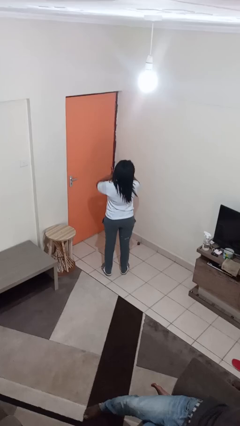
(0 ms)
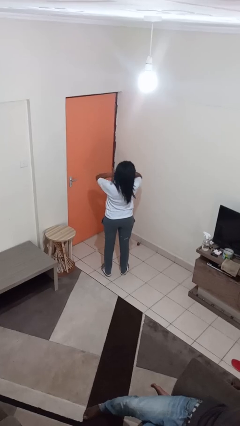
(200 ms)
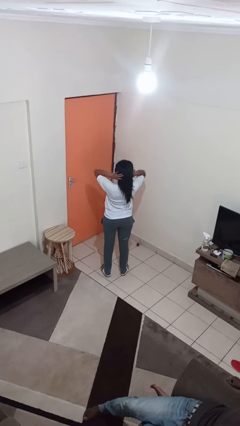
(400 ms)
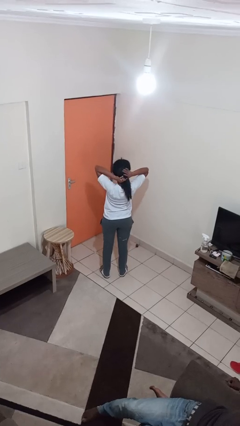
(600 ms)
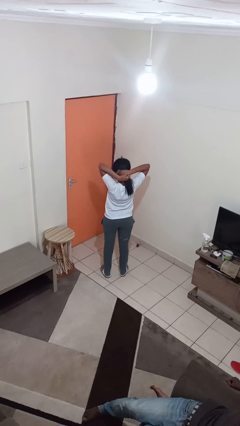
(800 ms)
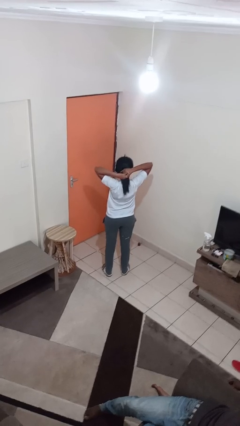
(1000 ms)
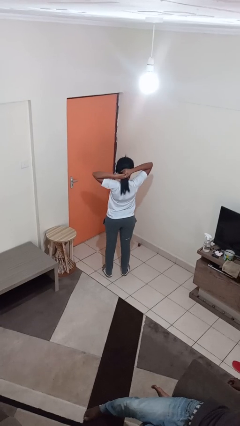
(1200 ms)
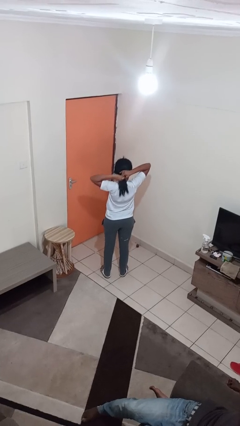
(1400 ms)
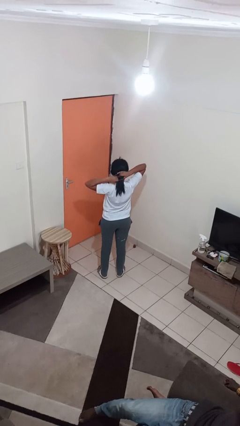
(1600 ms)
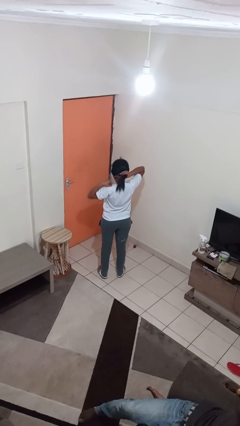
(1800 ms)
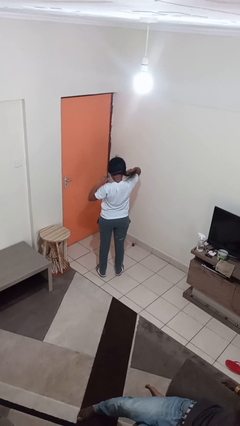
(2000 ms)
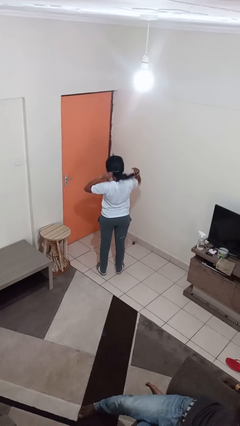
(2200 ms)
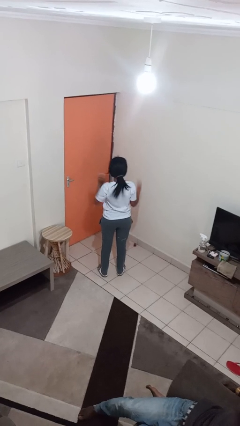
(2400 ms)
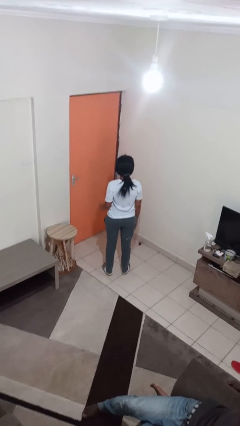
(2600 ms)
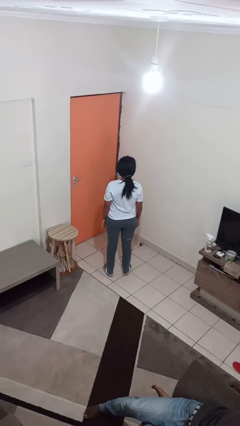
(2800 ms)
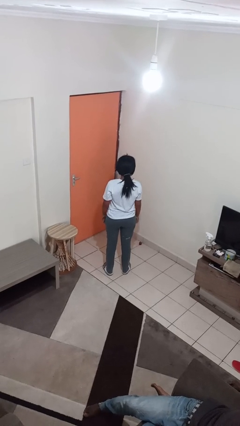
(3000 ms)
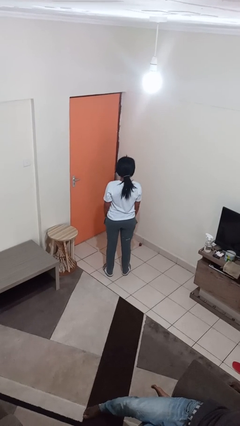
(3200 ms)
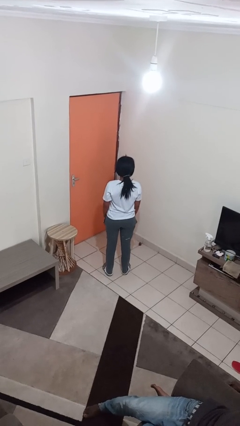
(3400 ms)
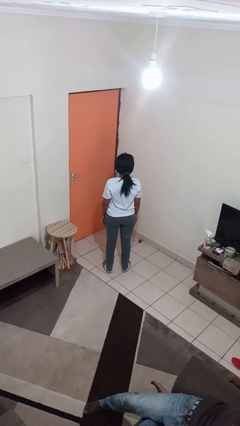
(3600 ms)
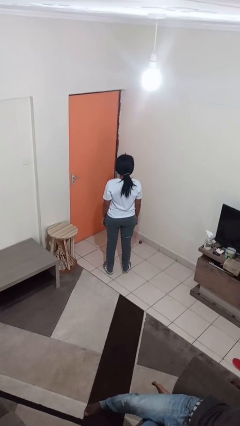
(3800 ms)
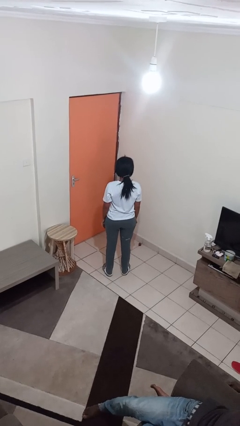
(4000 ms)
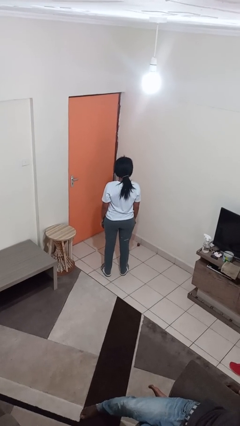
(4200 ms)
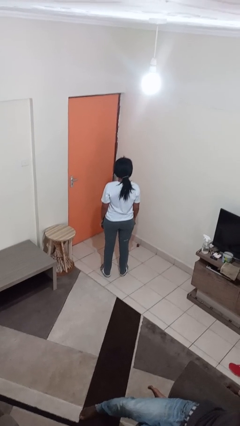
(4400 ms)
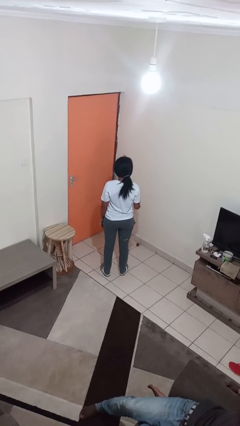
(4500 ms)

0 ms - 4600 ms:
person puts hair in ponytail

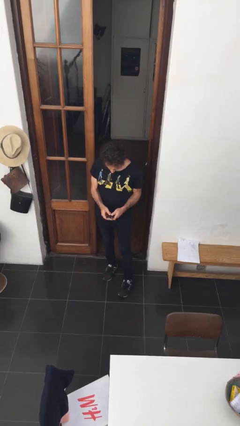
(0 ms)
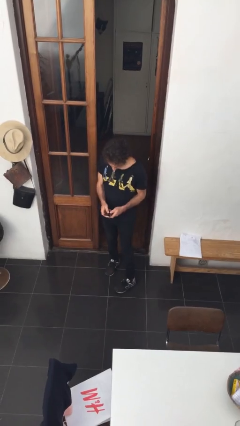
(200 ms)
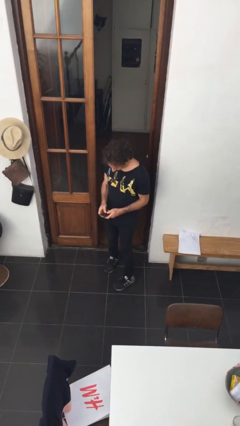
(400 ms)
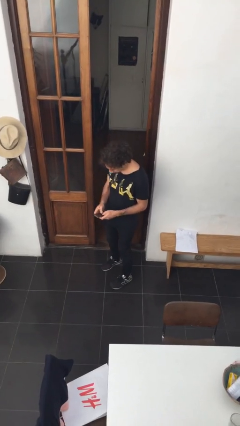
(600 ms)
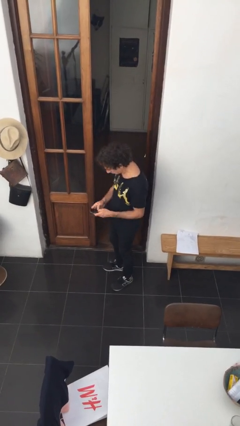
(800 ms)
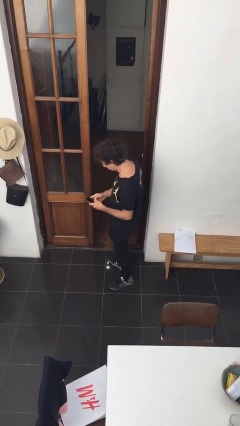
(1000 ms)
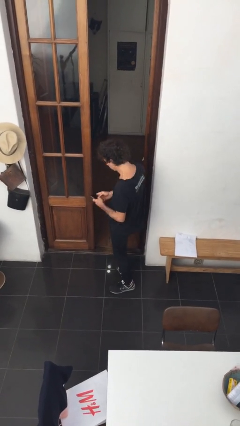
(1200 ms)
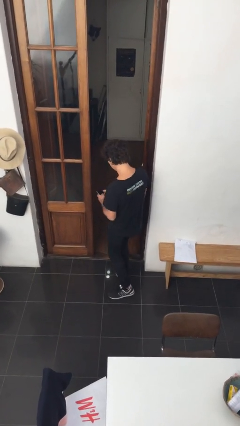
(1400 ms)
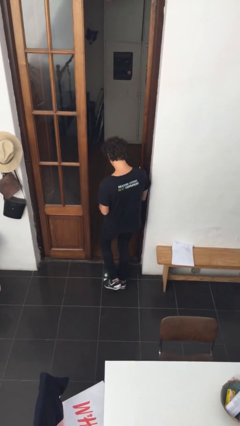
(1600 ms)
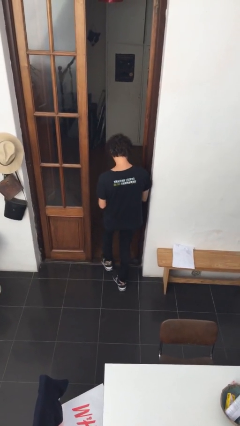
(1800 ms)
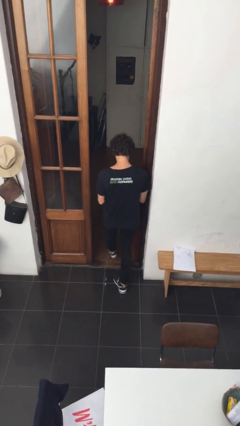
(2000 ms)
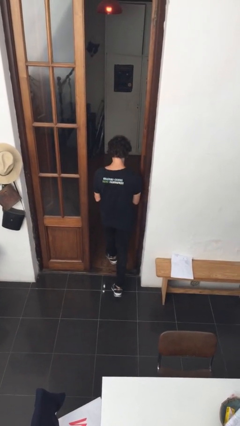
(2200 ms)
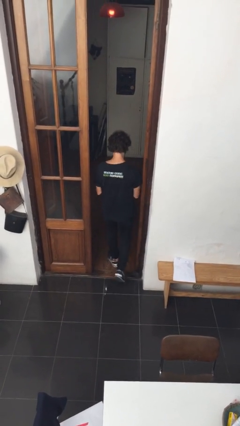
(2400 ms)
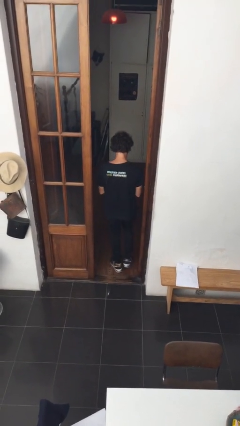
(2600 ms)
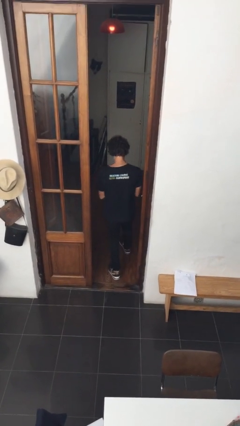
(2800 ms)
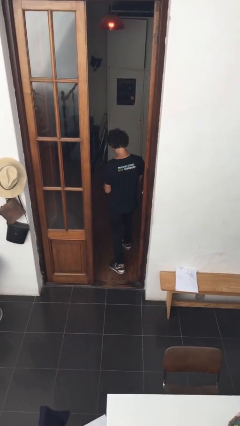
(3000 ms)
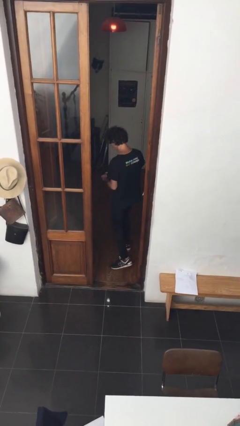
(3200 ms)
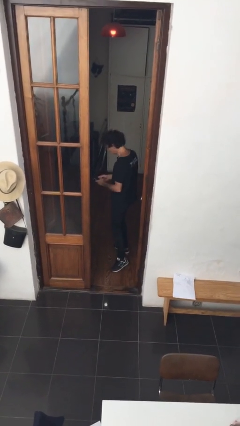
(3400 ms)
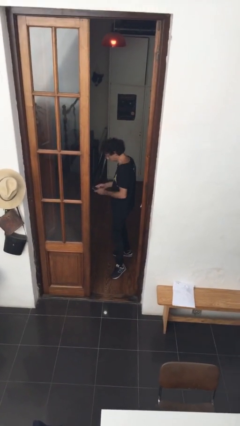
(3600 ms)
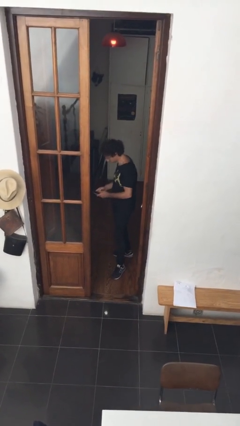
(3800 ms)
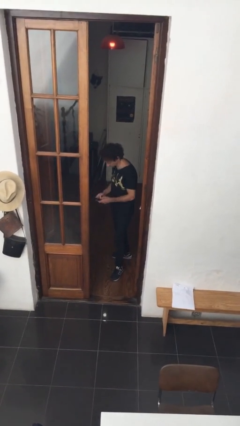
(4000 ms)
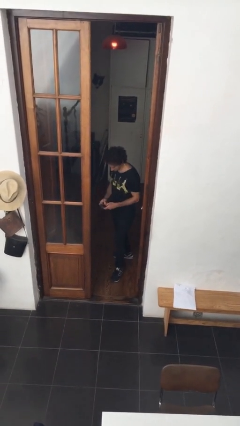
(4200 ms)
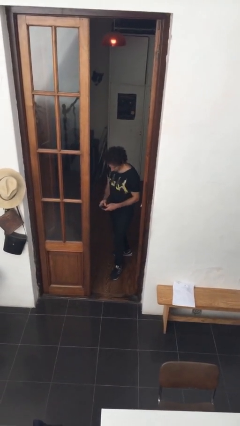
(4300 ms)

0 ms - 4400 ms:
person exits scene through structure

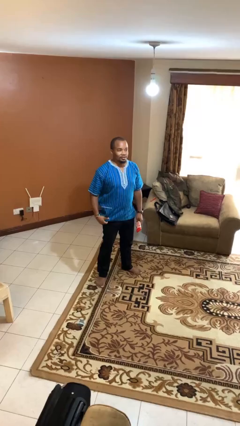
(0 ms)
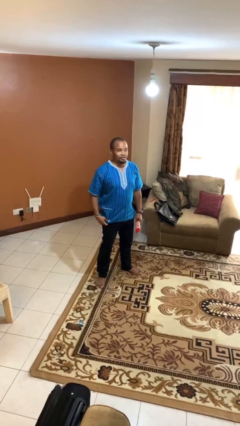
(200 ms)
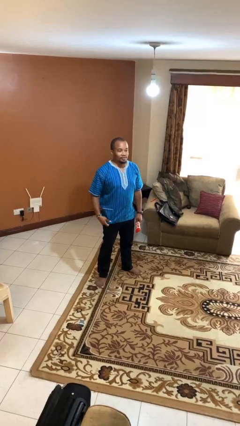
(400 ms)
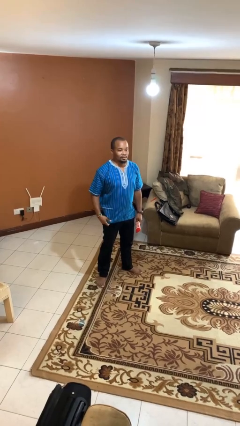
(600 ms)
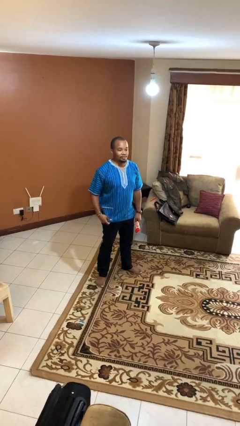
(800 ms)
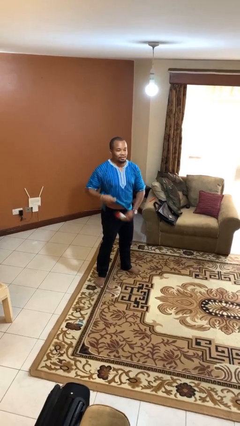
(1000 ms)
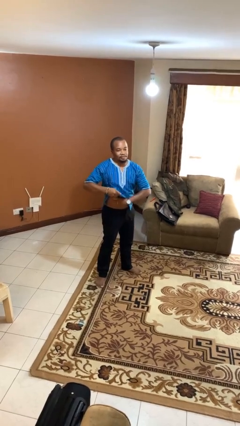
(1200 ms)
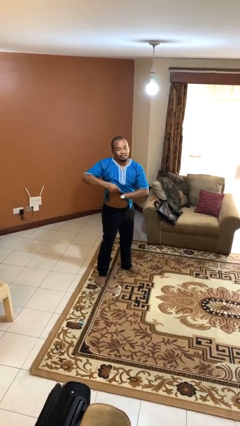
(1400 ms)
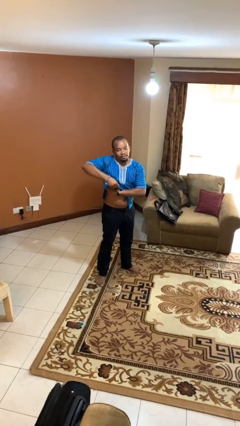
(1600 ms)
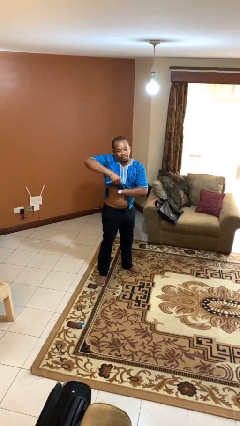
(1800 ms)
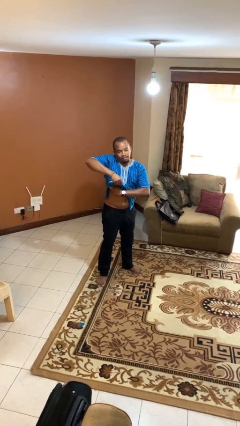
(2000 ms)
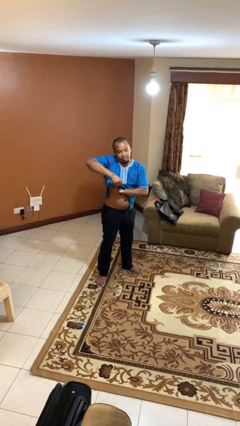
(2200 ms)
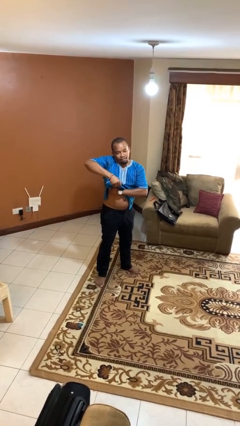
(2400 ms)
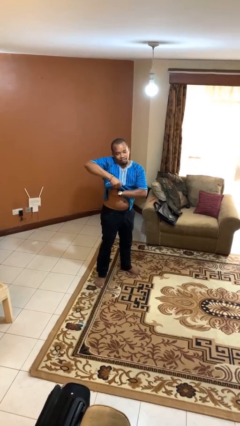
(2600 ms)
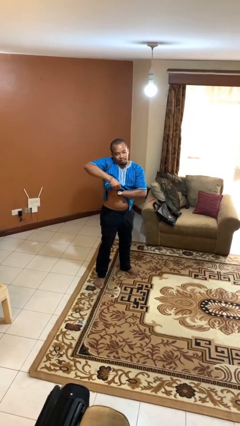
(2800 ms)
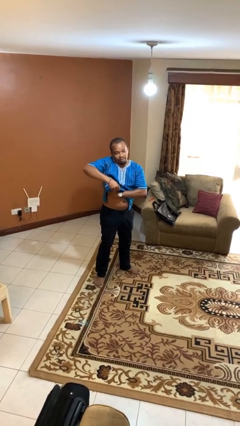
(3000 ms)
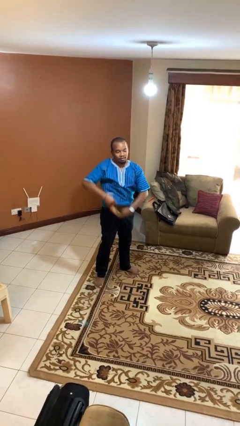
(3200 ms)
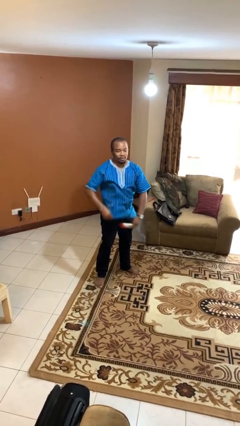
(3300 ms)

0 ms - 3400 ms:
person applies deodorant

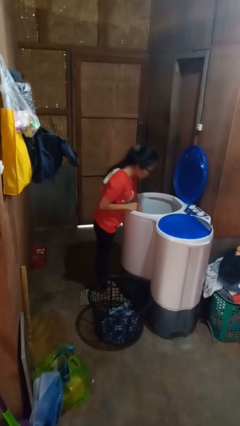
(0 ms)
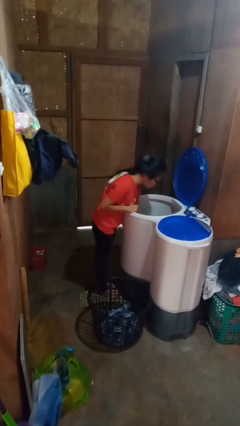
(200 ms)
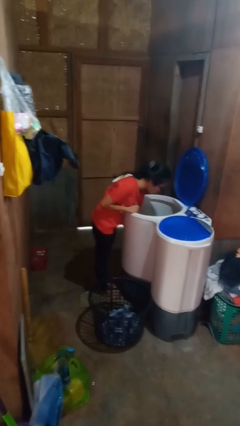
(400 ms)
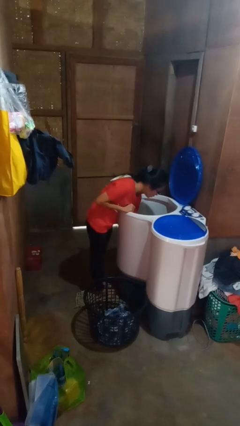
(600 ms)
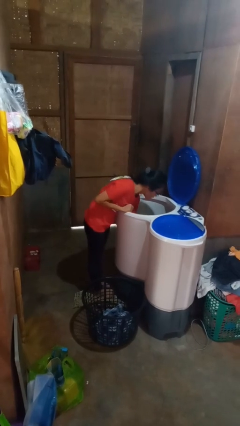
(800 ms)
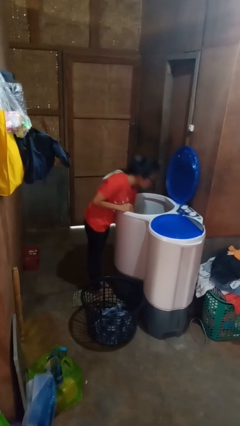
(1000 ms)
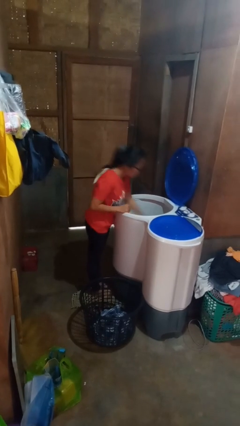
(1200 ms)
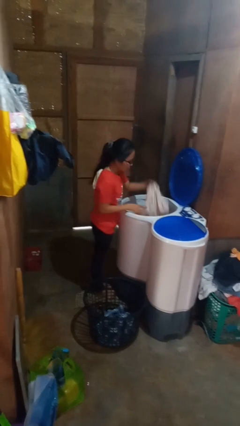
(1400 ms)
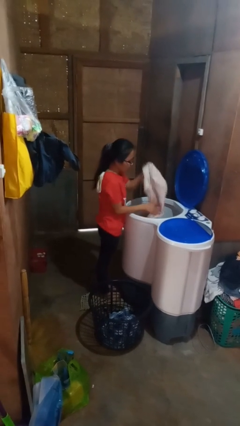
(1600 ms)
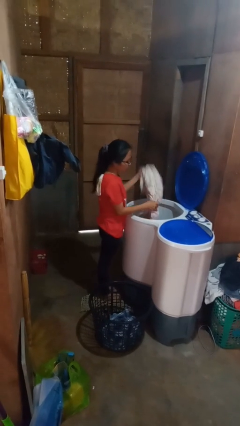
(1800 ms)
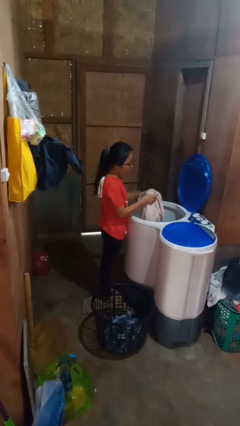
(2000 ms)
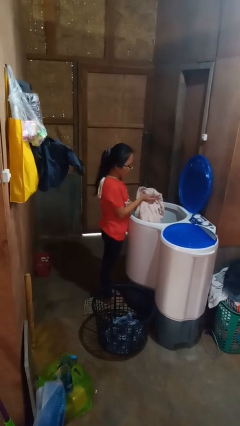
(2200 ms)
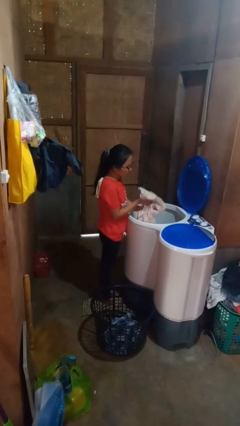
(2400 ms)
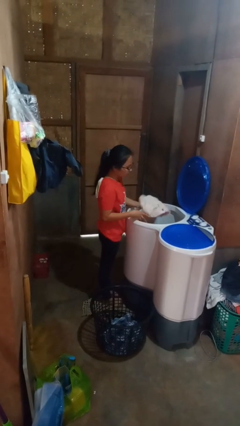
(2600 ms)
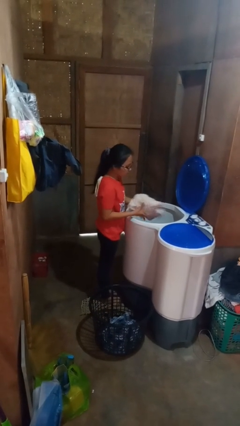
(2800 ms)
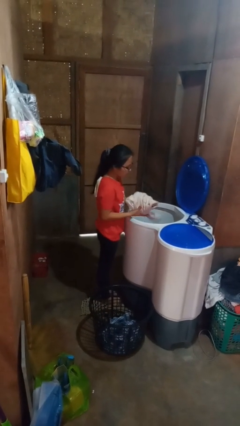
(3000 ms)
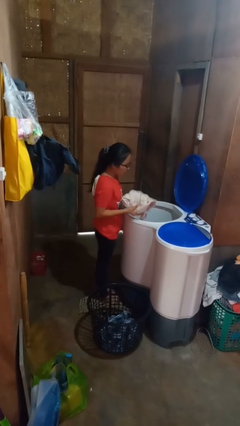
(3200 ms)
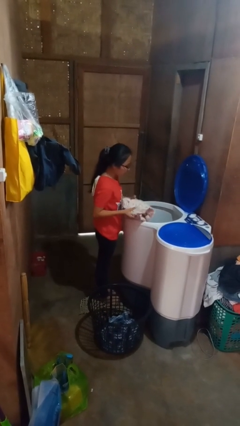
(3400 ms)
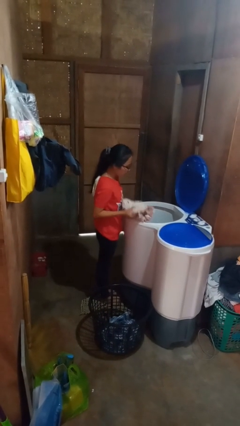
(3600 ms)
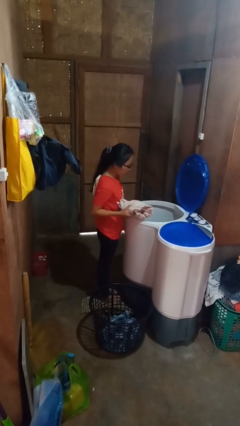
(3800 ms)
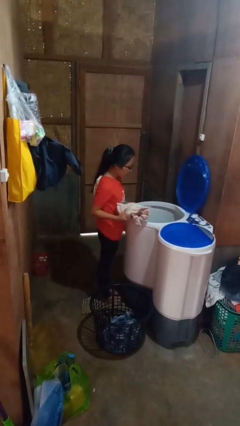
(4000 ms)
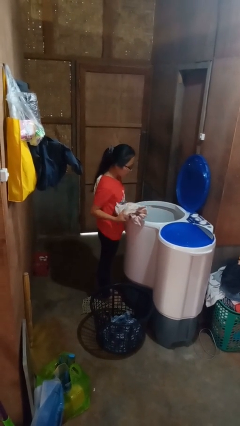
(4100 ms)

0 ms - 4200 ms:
person loads clotheswasher

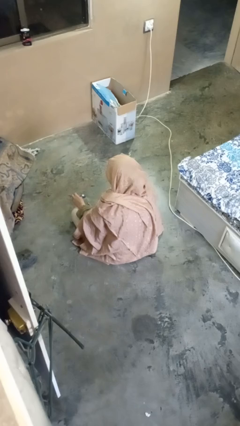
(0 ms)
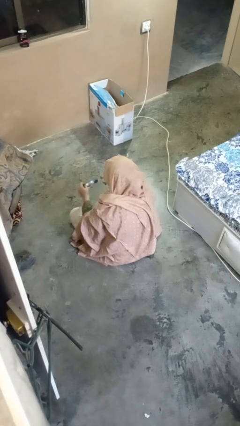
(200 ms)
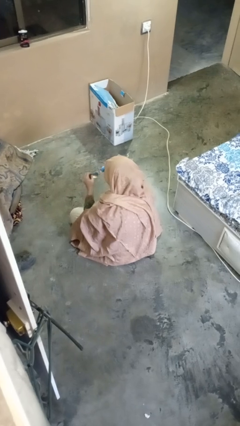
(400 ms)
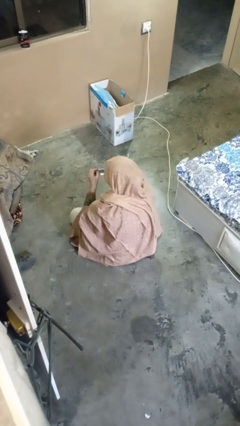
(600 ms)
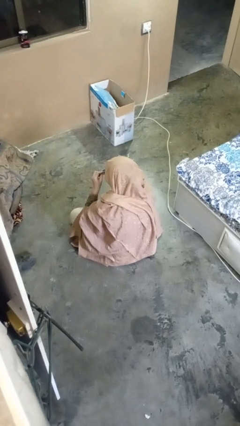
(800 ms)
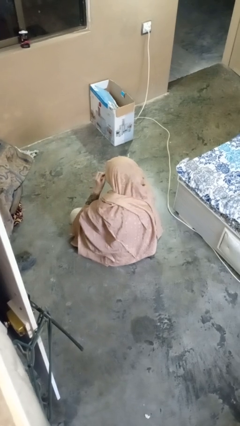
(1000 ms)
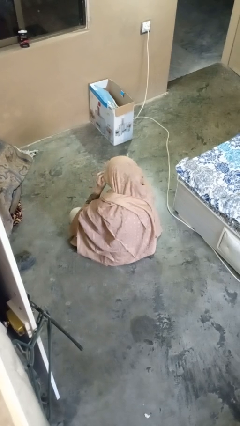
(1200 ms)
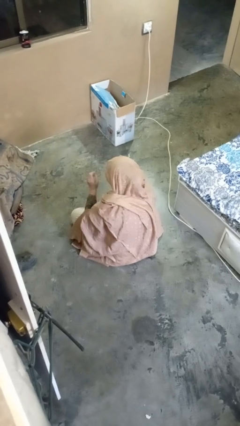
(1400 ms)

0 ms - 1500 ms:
person puts on glasses
